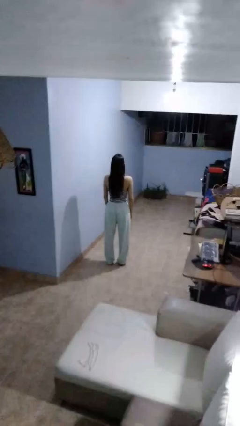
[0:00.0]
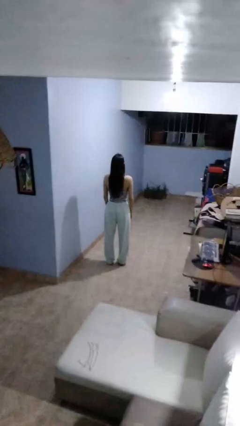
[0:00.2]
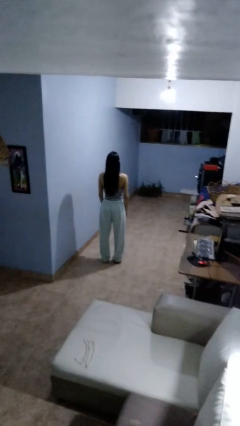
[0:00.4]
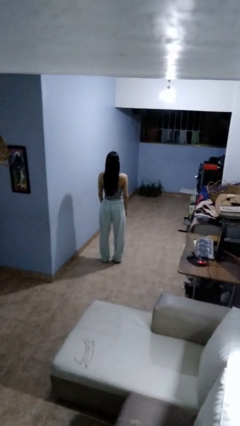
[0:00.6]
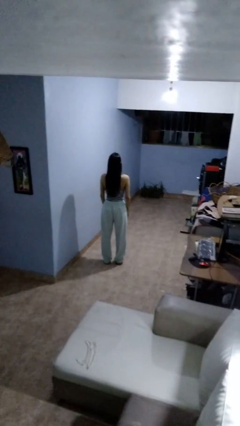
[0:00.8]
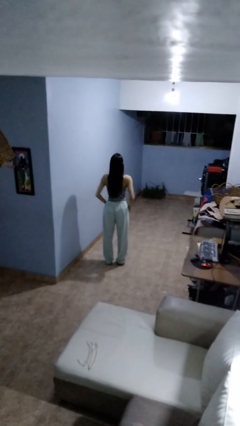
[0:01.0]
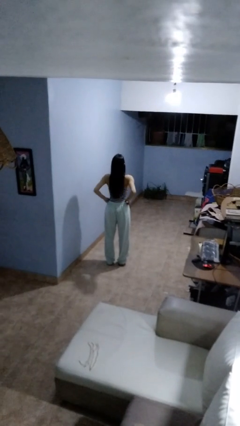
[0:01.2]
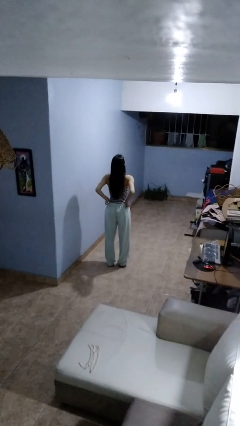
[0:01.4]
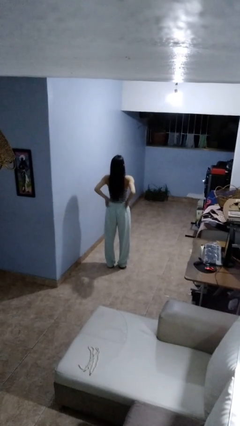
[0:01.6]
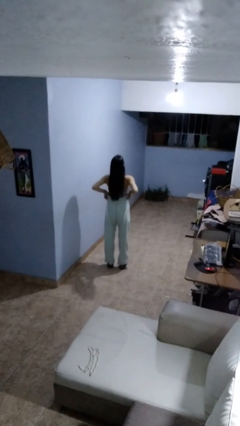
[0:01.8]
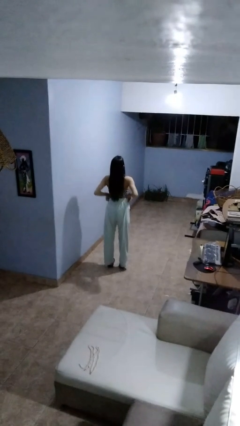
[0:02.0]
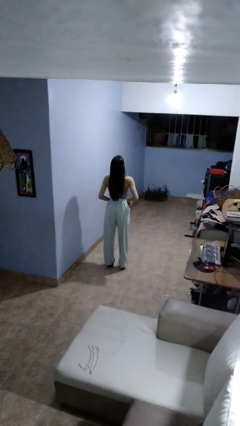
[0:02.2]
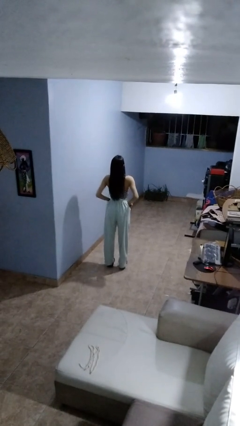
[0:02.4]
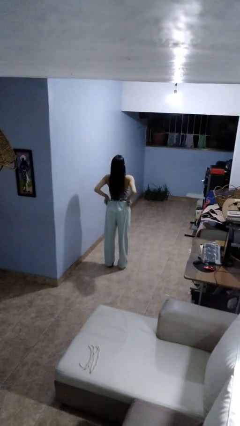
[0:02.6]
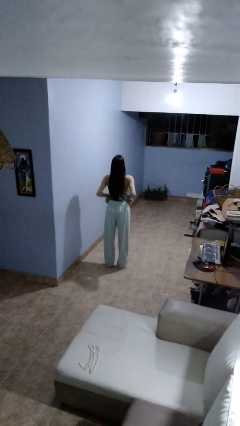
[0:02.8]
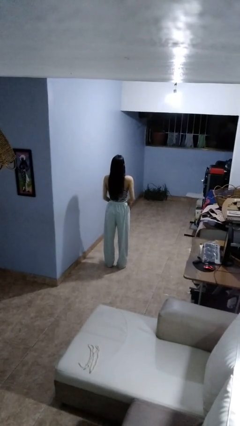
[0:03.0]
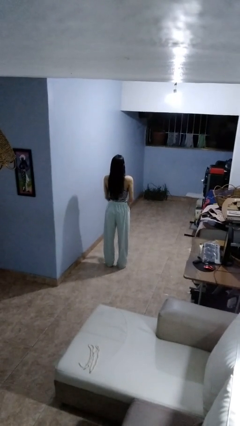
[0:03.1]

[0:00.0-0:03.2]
person hikes up pants

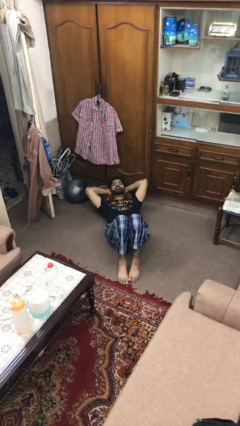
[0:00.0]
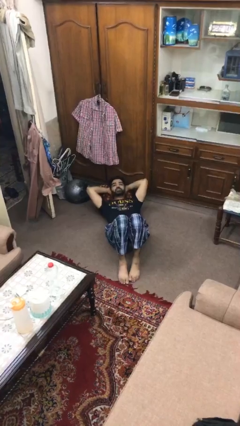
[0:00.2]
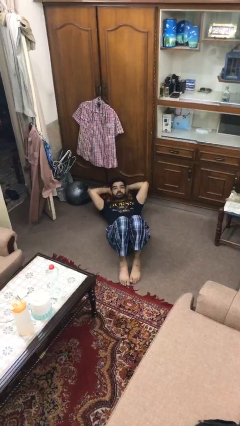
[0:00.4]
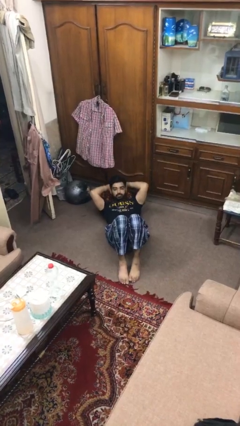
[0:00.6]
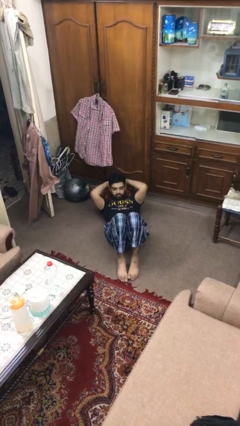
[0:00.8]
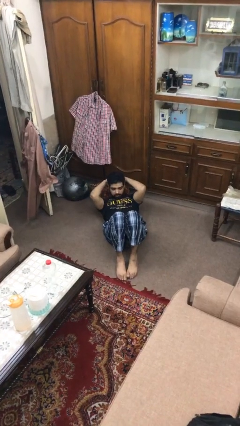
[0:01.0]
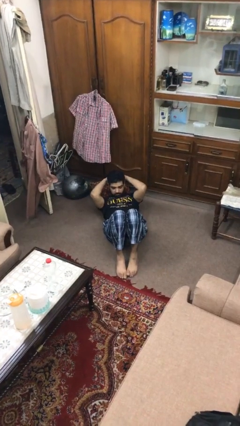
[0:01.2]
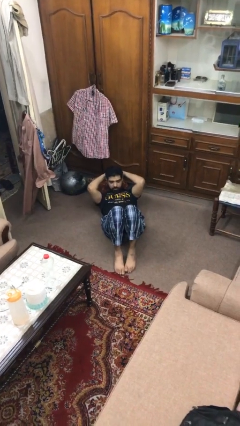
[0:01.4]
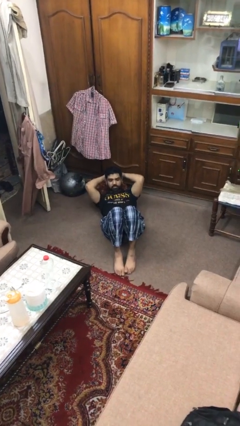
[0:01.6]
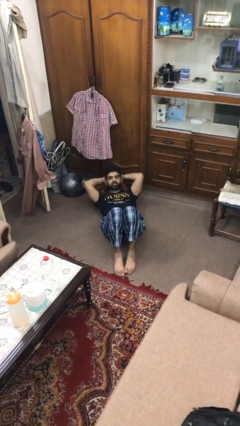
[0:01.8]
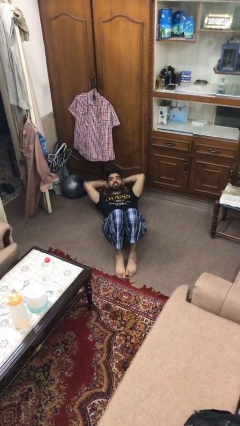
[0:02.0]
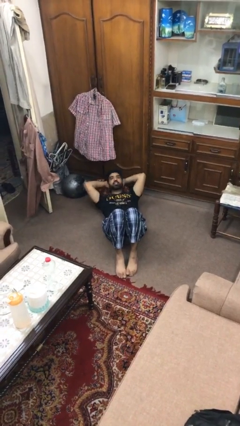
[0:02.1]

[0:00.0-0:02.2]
person exercises with situp

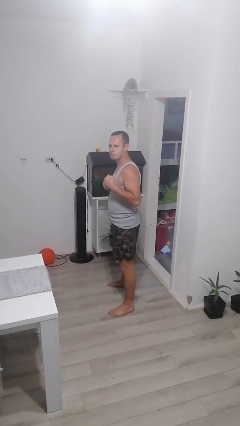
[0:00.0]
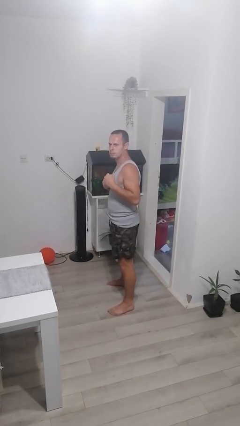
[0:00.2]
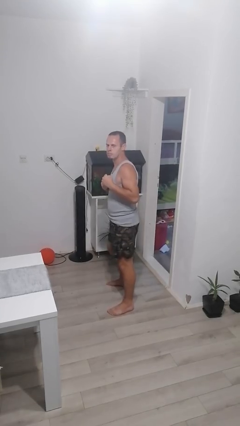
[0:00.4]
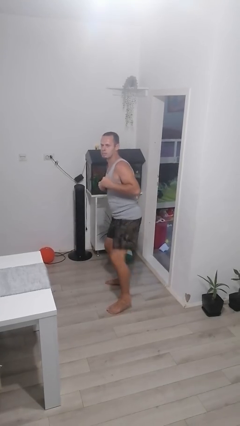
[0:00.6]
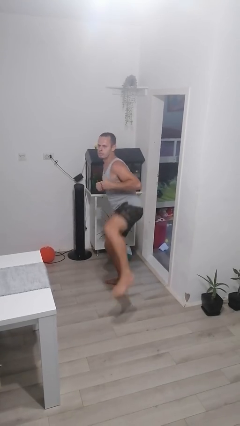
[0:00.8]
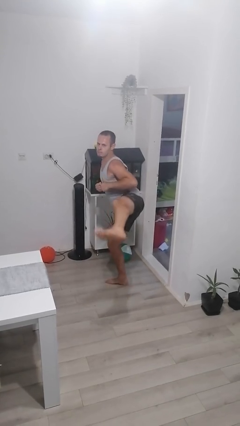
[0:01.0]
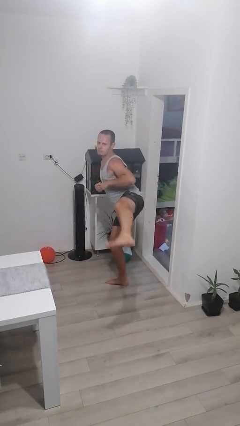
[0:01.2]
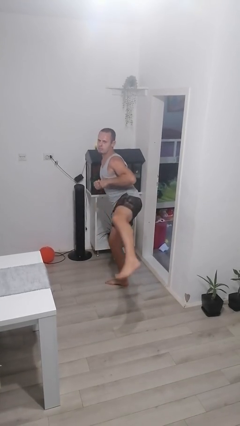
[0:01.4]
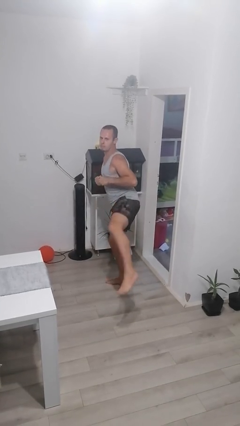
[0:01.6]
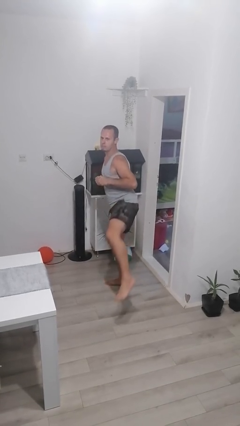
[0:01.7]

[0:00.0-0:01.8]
person karate kicks

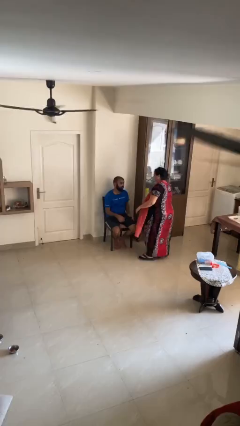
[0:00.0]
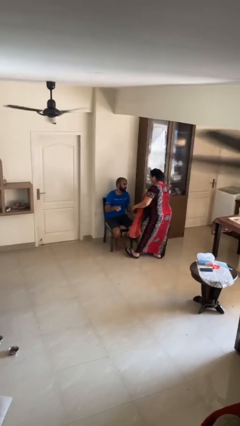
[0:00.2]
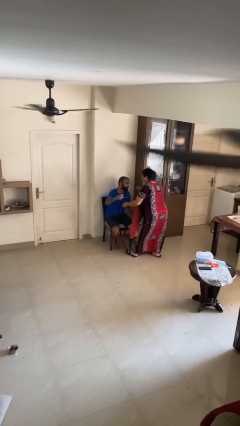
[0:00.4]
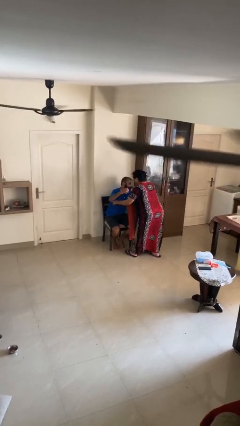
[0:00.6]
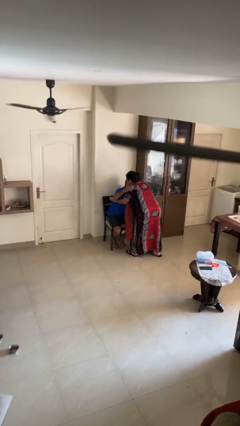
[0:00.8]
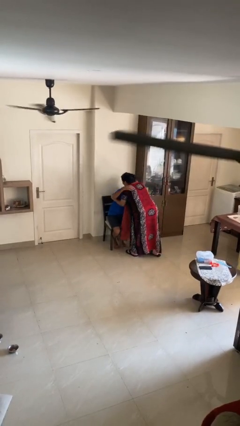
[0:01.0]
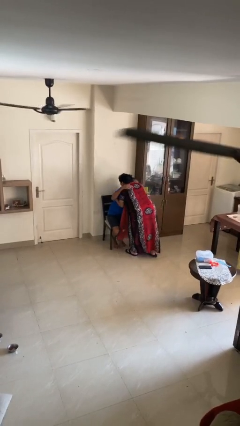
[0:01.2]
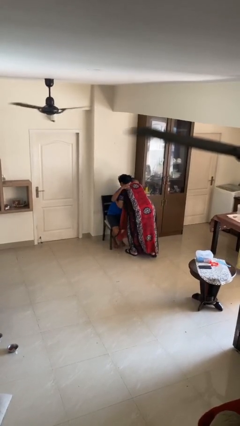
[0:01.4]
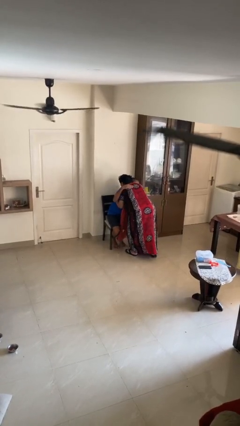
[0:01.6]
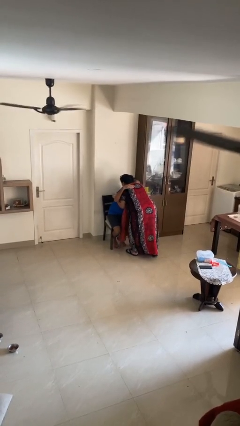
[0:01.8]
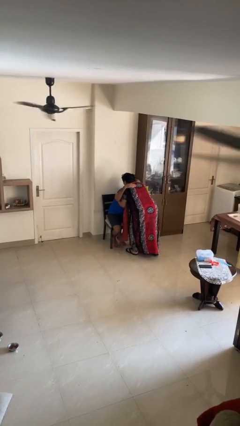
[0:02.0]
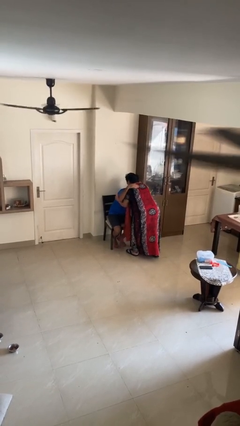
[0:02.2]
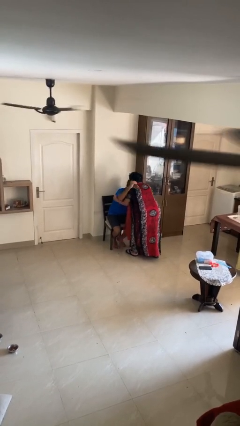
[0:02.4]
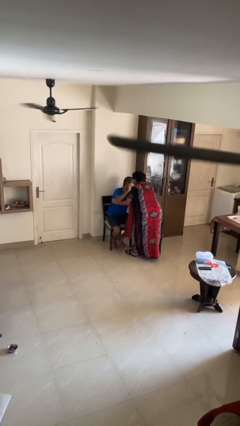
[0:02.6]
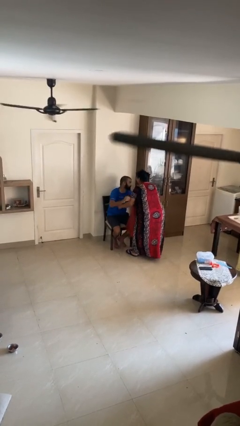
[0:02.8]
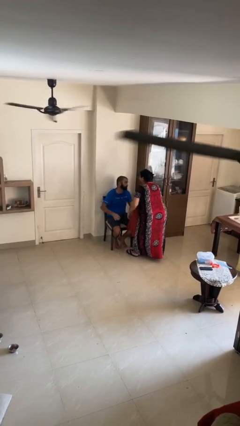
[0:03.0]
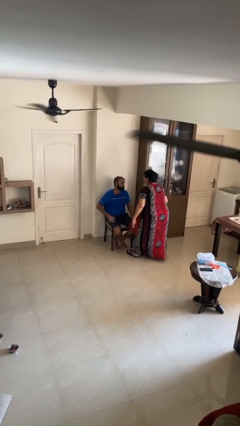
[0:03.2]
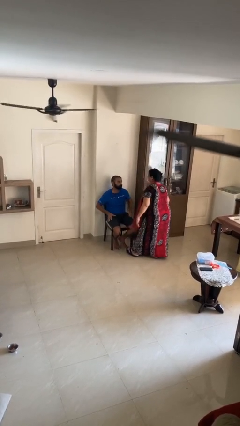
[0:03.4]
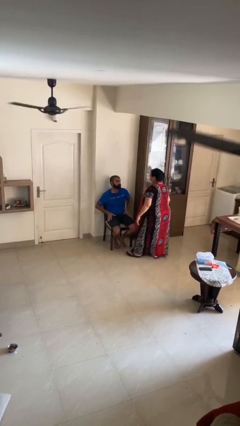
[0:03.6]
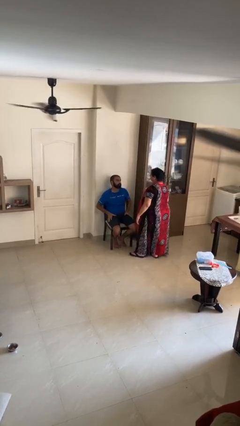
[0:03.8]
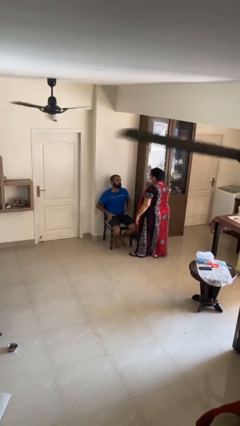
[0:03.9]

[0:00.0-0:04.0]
person embraces person

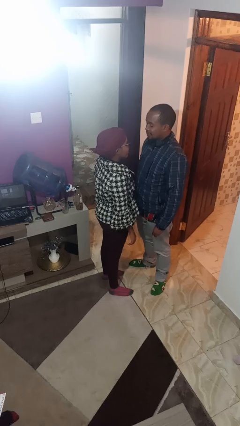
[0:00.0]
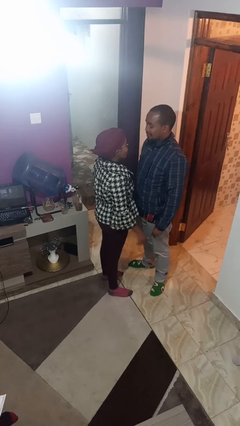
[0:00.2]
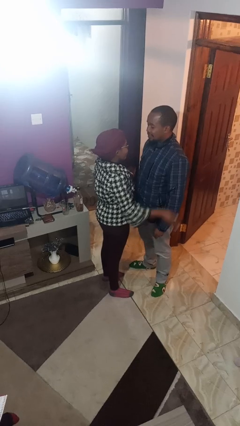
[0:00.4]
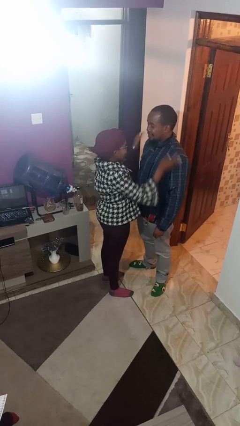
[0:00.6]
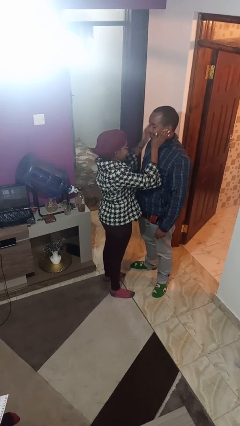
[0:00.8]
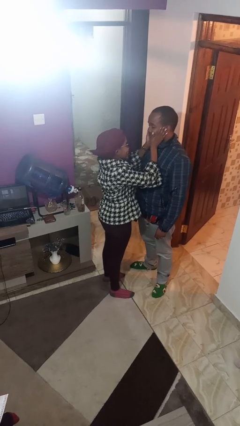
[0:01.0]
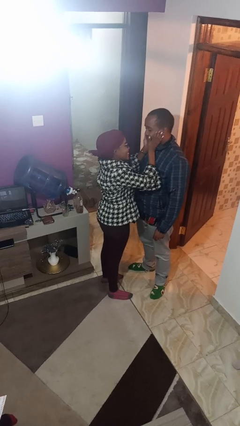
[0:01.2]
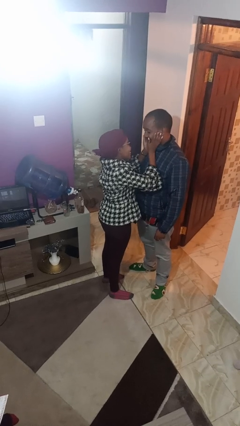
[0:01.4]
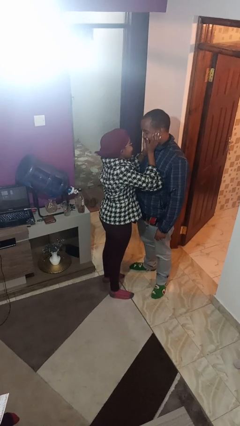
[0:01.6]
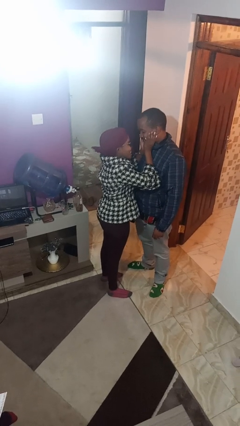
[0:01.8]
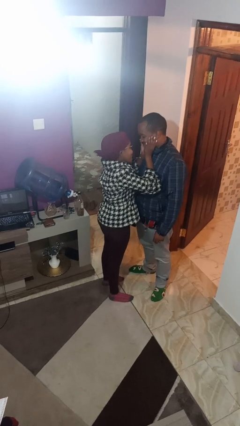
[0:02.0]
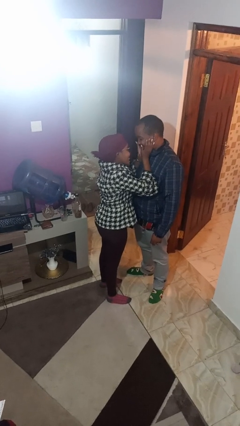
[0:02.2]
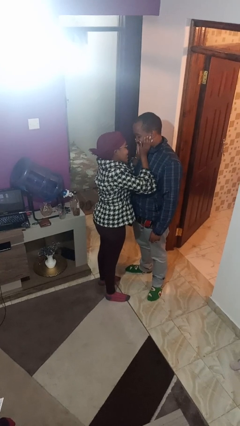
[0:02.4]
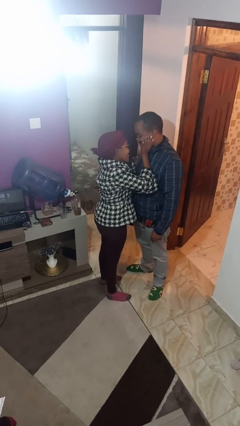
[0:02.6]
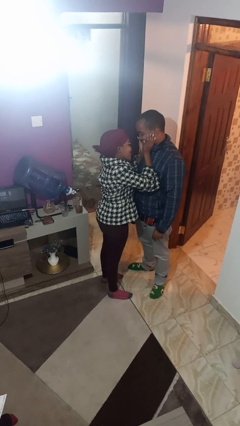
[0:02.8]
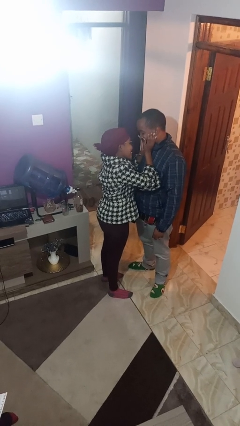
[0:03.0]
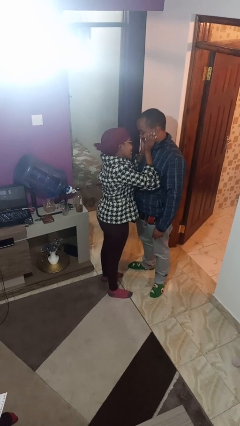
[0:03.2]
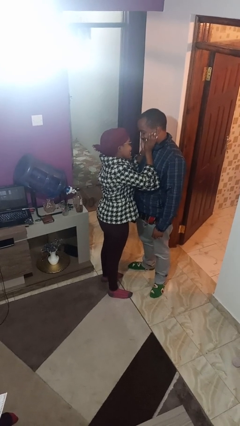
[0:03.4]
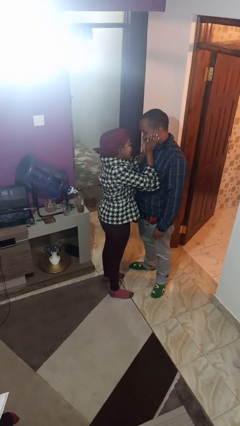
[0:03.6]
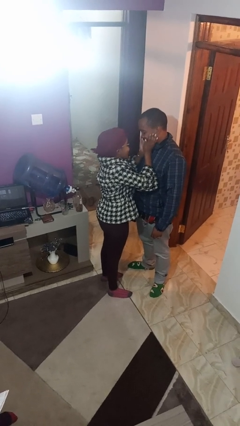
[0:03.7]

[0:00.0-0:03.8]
person touches face of person

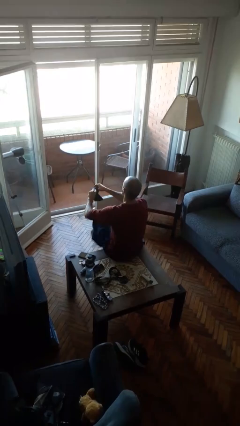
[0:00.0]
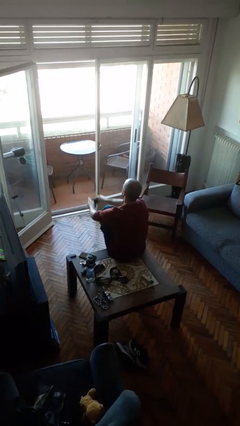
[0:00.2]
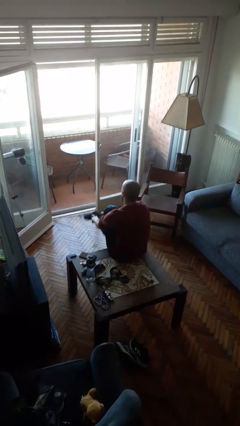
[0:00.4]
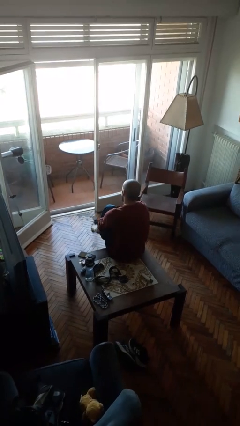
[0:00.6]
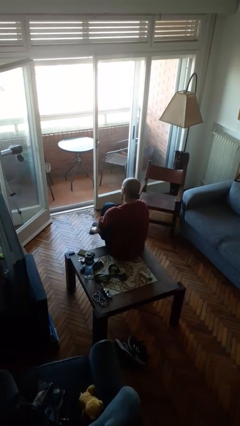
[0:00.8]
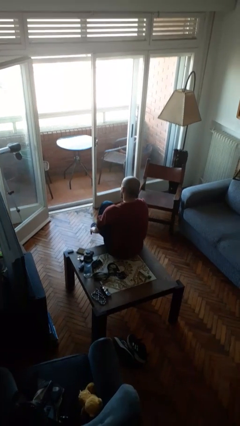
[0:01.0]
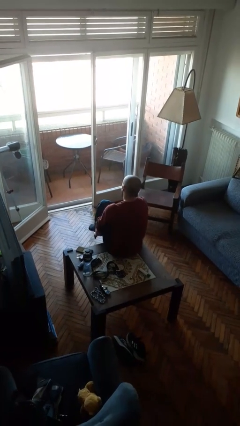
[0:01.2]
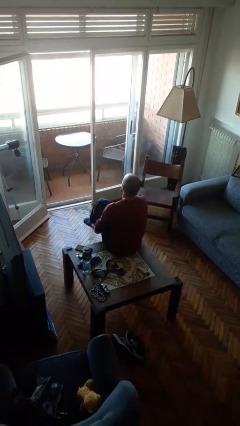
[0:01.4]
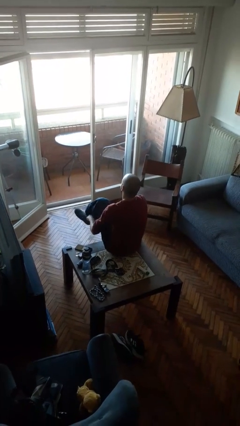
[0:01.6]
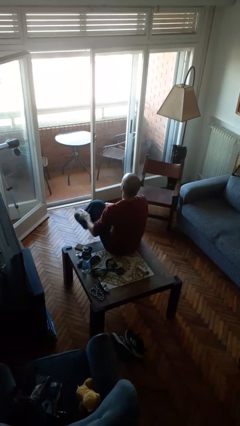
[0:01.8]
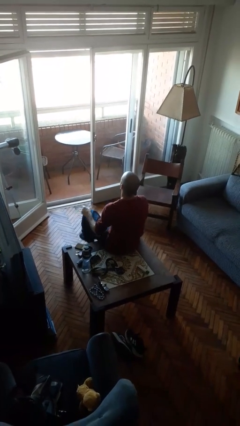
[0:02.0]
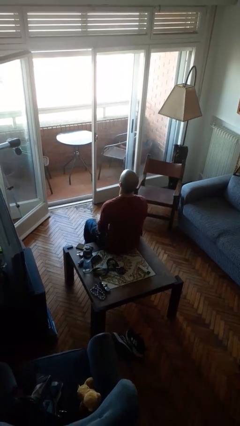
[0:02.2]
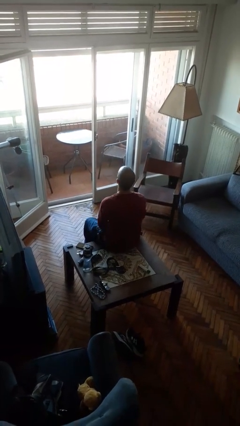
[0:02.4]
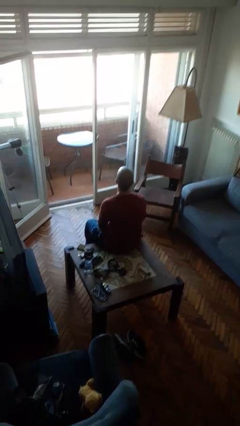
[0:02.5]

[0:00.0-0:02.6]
person puts on socks
